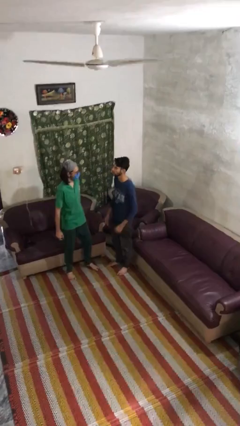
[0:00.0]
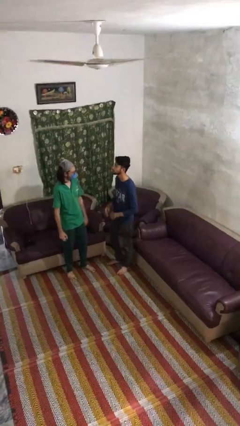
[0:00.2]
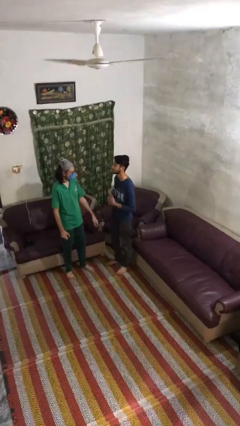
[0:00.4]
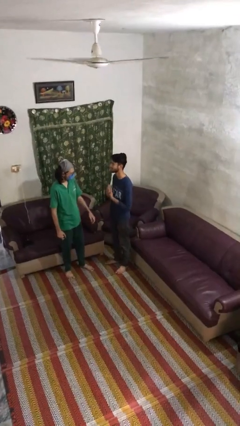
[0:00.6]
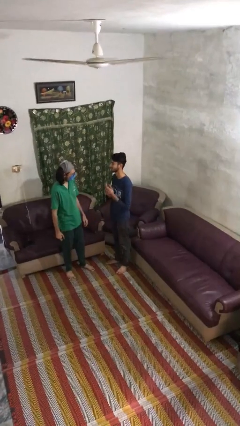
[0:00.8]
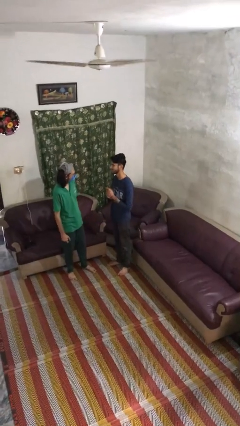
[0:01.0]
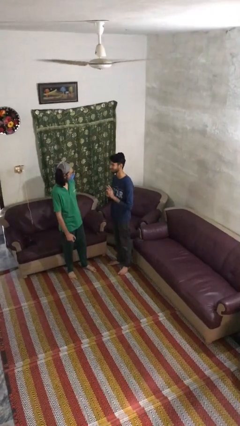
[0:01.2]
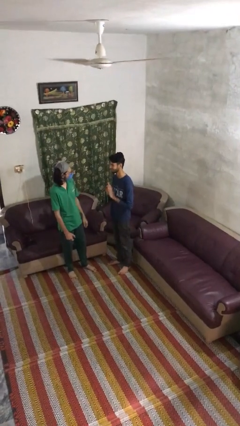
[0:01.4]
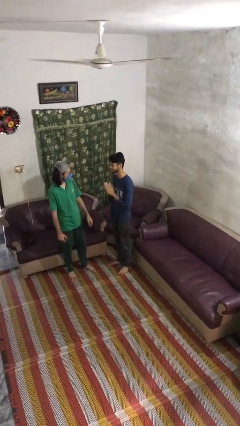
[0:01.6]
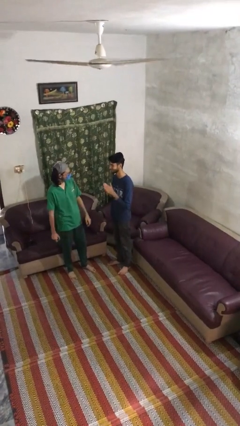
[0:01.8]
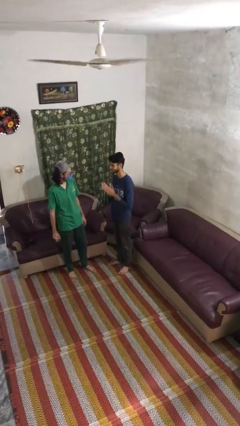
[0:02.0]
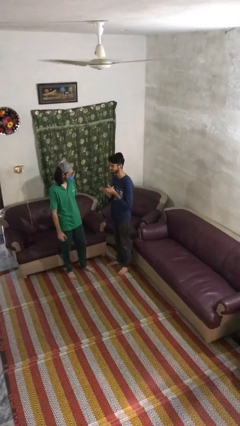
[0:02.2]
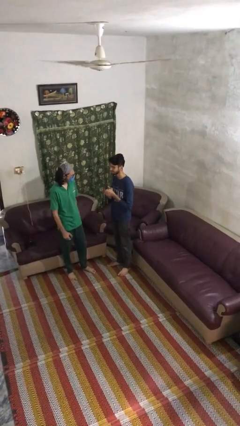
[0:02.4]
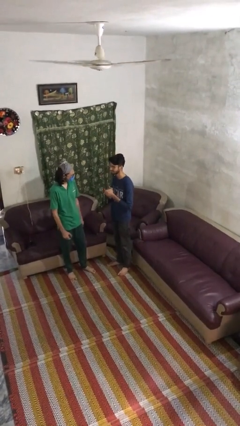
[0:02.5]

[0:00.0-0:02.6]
person talks to person

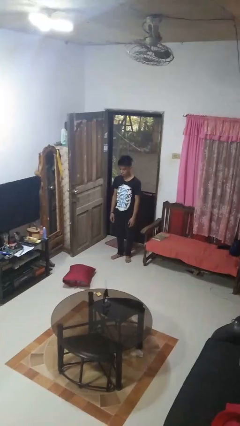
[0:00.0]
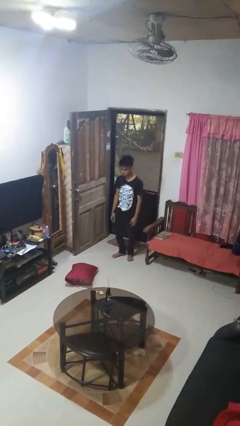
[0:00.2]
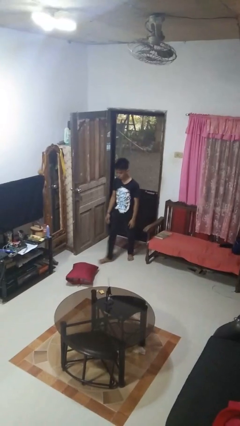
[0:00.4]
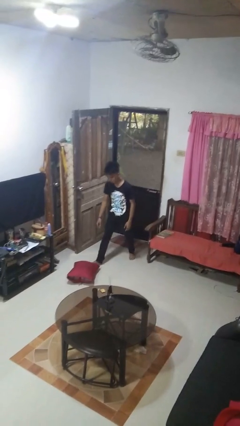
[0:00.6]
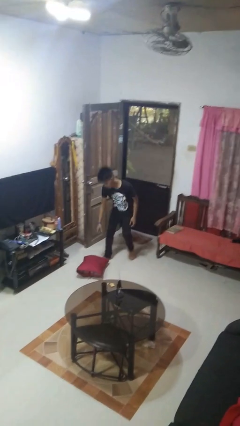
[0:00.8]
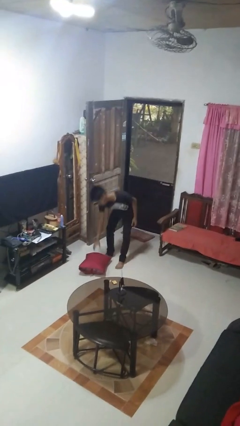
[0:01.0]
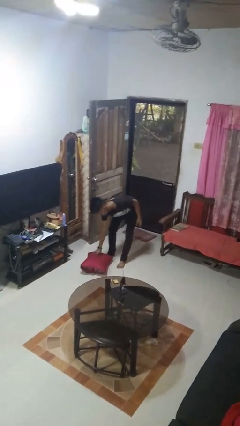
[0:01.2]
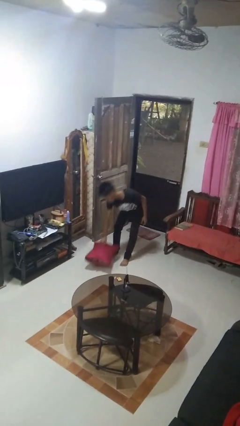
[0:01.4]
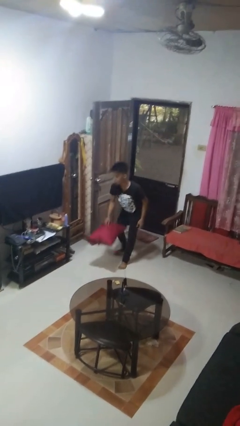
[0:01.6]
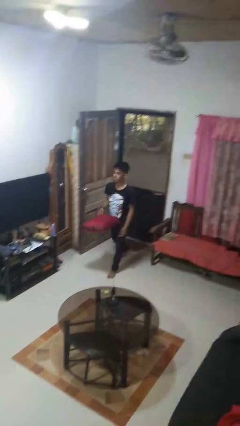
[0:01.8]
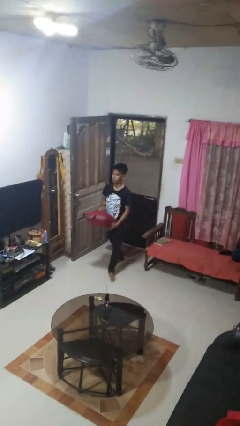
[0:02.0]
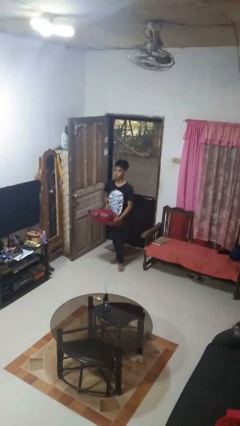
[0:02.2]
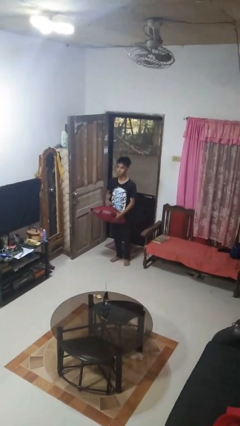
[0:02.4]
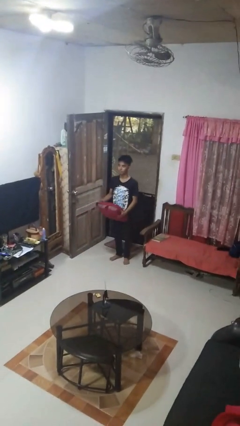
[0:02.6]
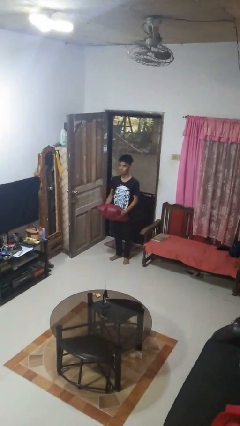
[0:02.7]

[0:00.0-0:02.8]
person picks up object from floor

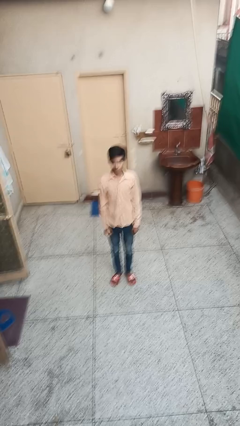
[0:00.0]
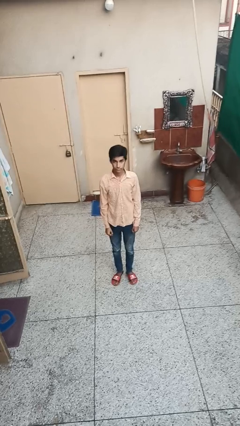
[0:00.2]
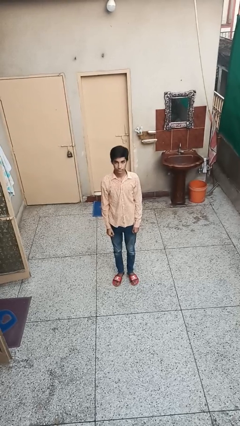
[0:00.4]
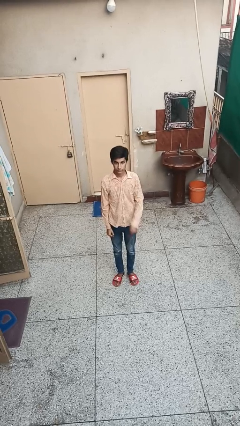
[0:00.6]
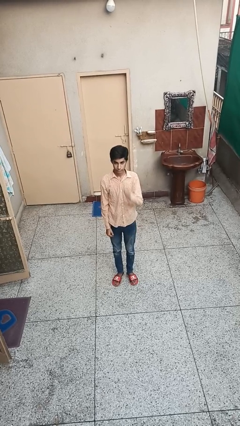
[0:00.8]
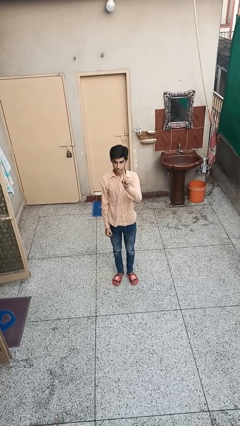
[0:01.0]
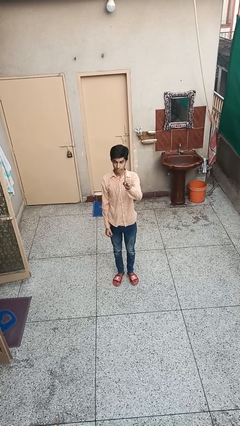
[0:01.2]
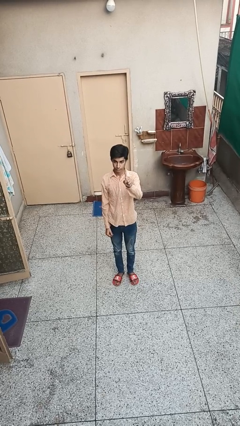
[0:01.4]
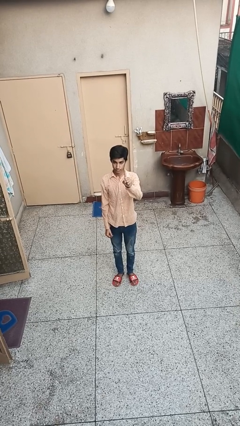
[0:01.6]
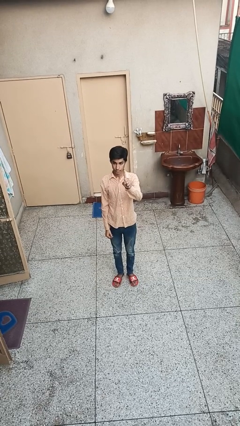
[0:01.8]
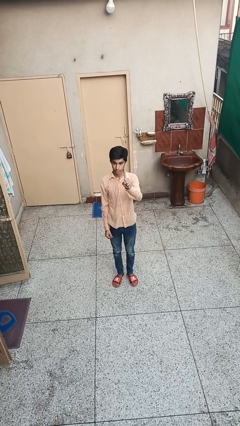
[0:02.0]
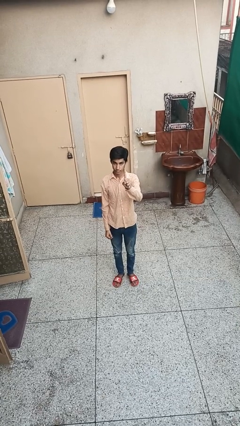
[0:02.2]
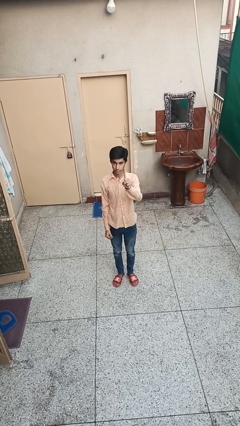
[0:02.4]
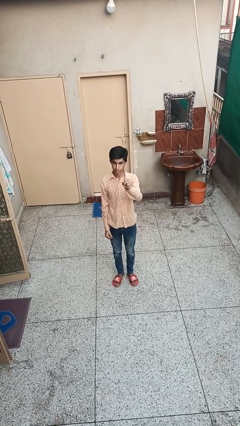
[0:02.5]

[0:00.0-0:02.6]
person gestures number one

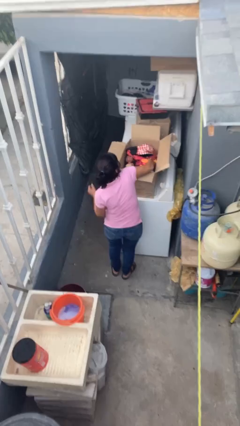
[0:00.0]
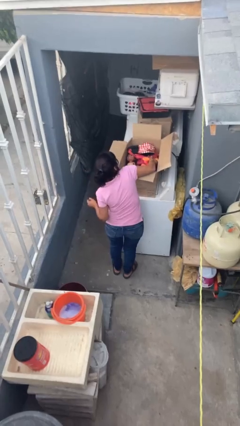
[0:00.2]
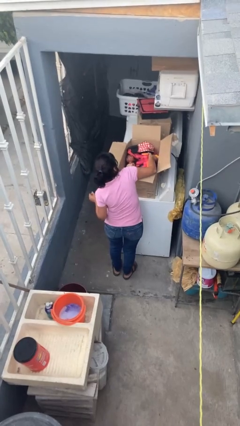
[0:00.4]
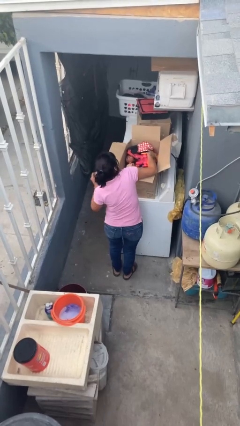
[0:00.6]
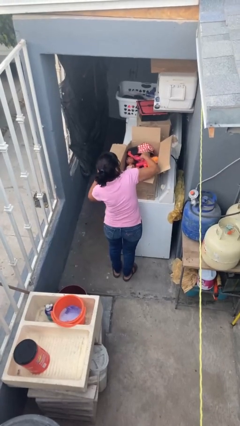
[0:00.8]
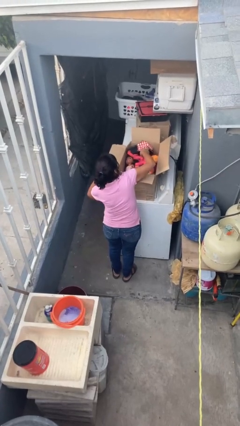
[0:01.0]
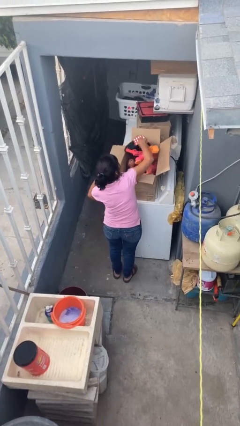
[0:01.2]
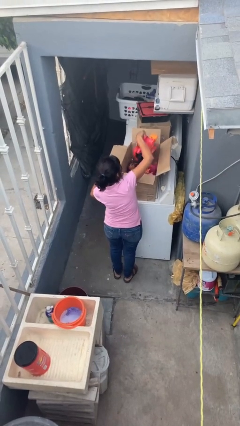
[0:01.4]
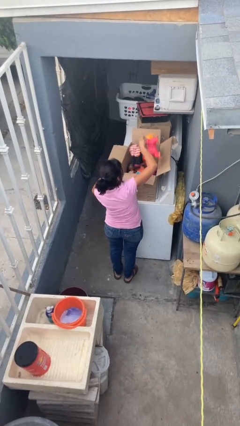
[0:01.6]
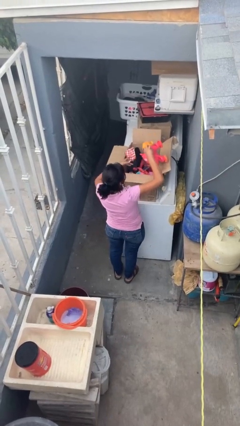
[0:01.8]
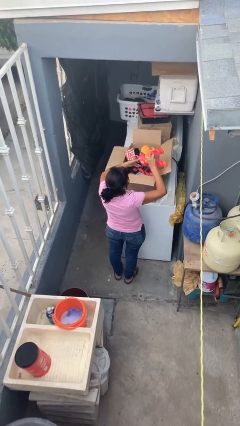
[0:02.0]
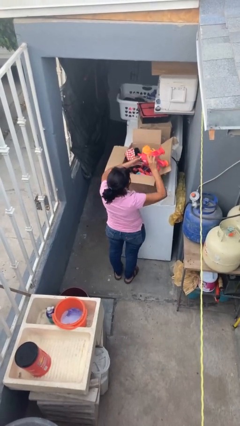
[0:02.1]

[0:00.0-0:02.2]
person takes object from box

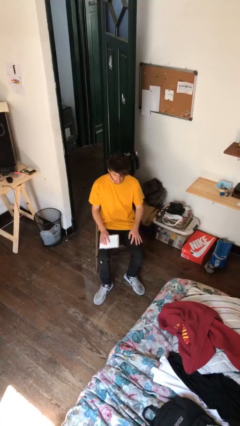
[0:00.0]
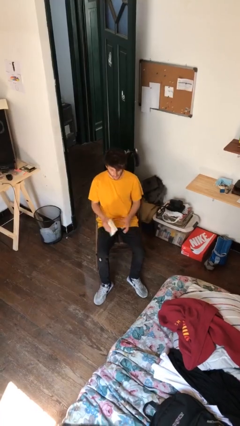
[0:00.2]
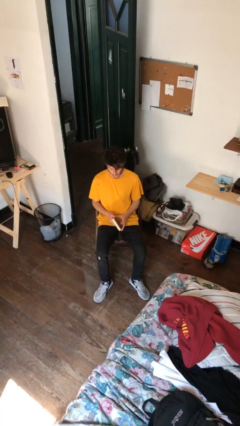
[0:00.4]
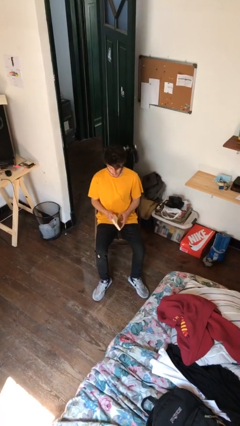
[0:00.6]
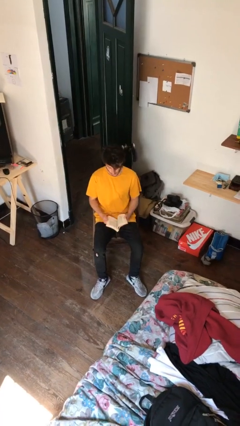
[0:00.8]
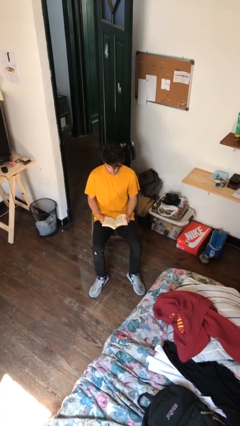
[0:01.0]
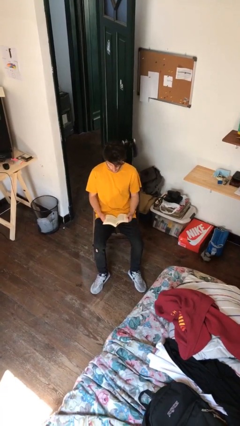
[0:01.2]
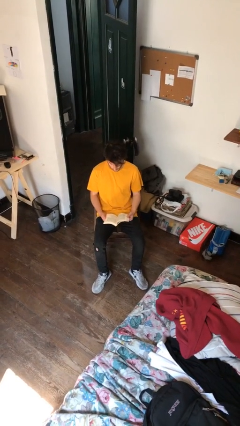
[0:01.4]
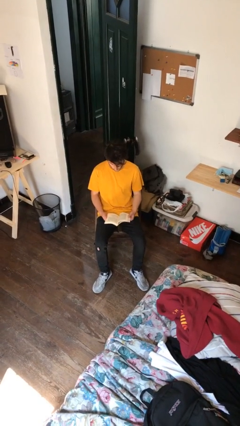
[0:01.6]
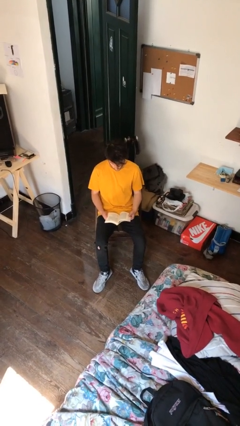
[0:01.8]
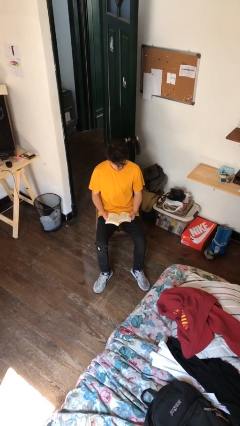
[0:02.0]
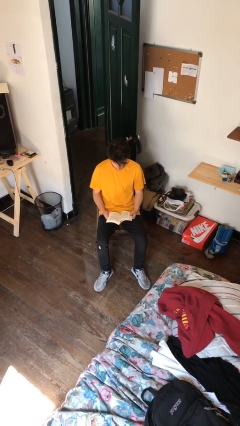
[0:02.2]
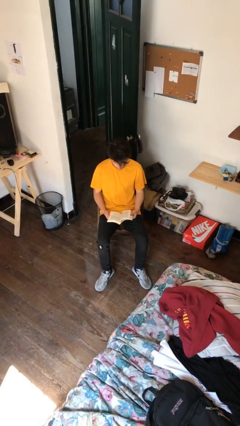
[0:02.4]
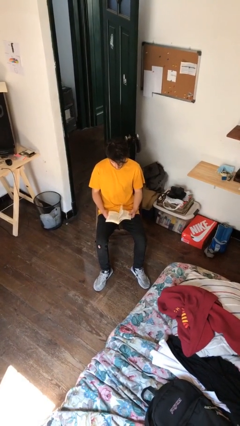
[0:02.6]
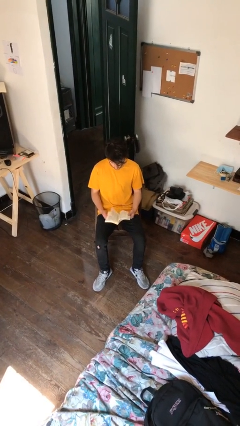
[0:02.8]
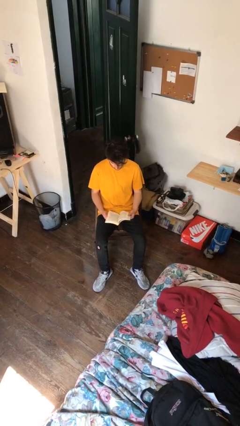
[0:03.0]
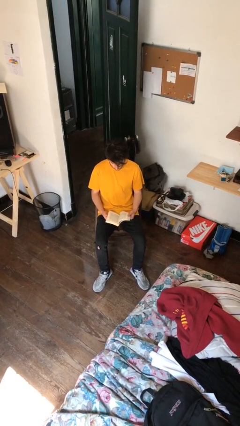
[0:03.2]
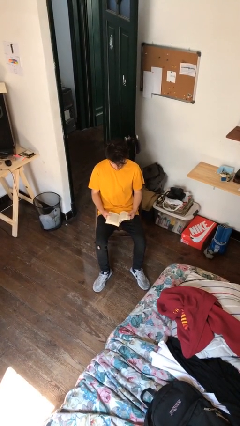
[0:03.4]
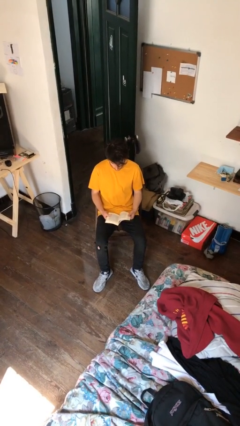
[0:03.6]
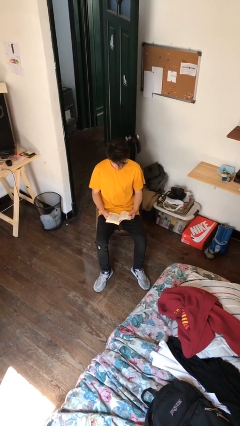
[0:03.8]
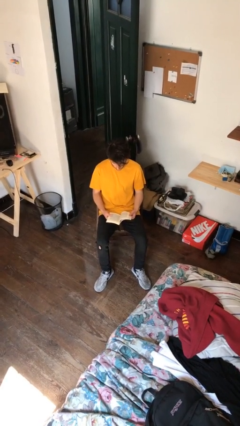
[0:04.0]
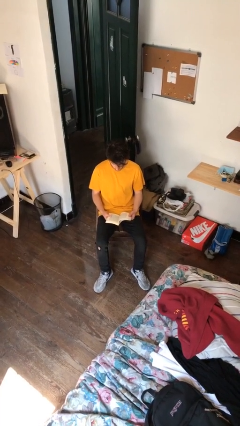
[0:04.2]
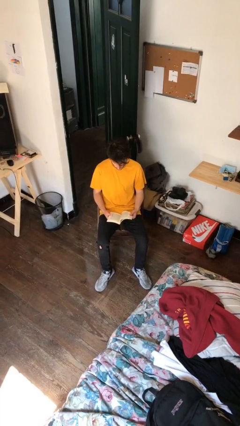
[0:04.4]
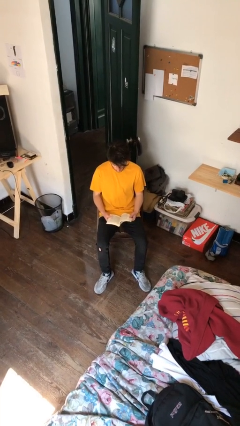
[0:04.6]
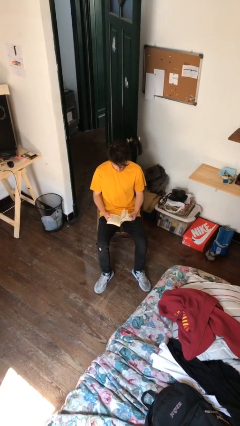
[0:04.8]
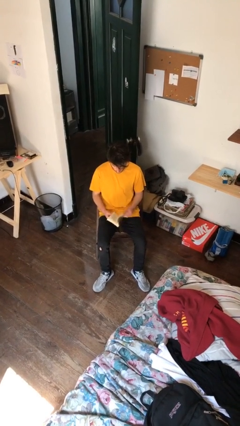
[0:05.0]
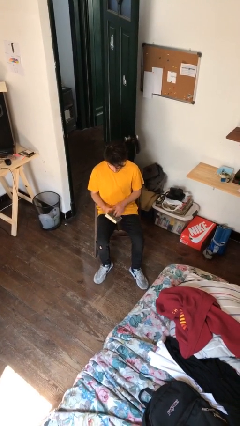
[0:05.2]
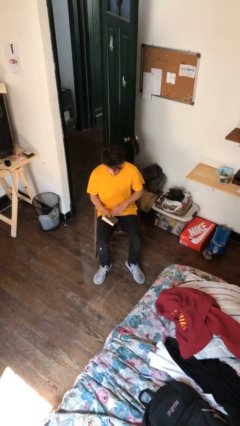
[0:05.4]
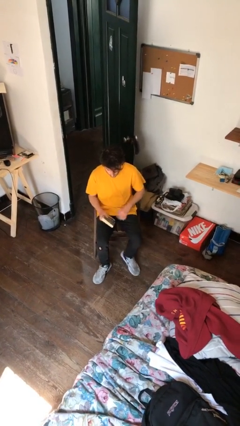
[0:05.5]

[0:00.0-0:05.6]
person reads document

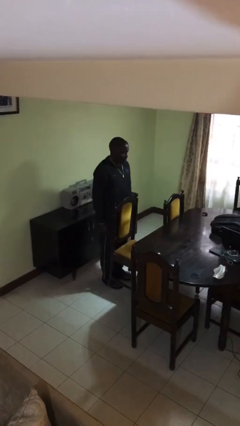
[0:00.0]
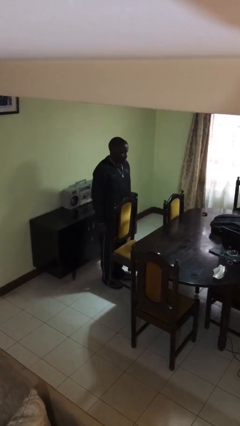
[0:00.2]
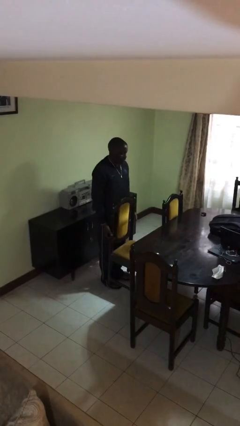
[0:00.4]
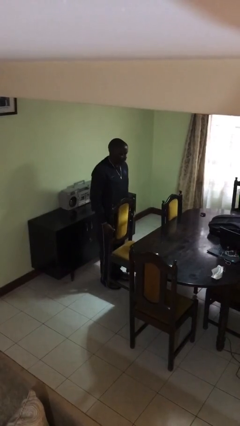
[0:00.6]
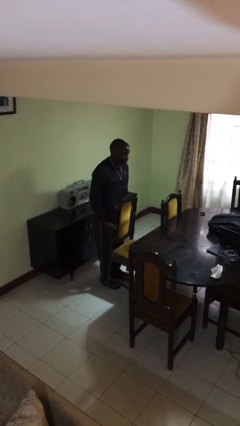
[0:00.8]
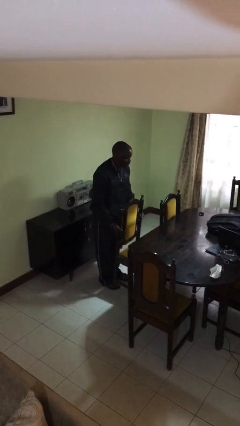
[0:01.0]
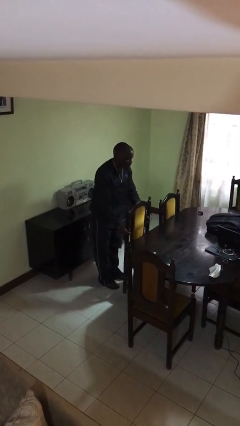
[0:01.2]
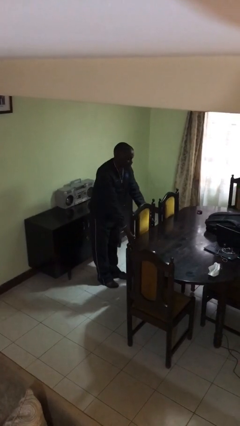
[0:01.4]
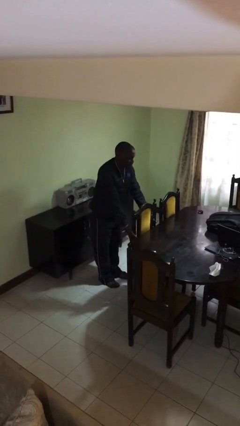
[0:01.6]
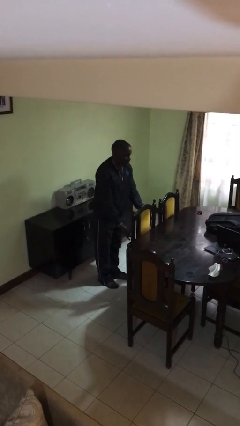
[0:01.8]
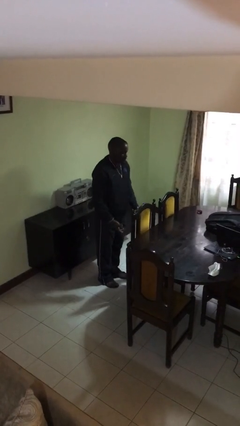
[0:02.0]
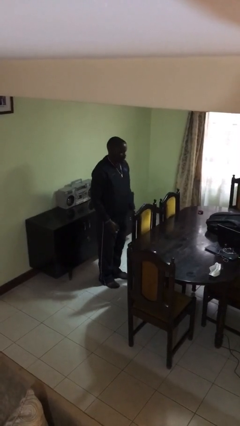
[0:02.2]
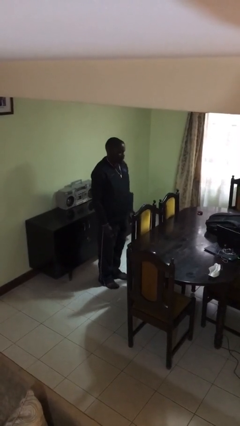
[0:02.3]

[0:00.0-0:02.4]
person pushes in chair
